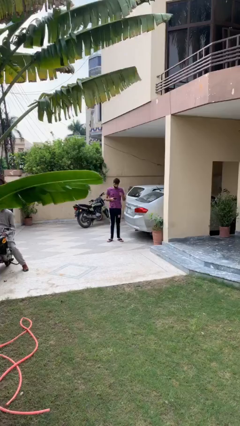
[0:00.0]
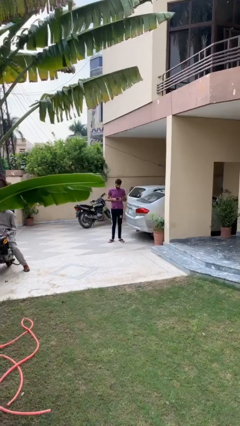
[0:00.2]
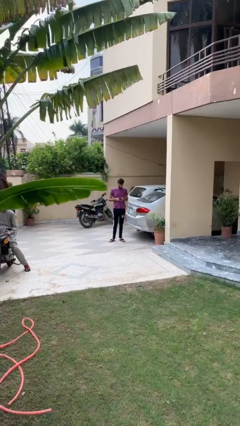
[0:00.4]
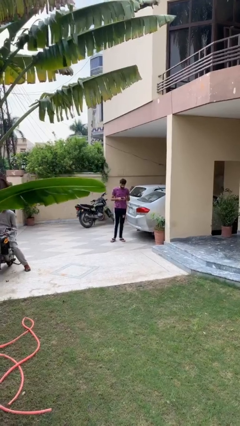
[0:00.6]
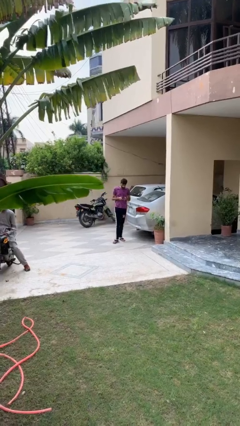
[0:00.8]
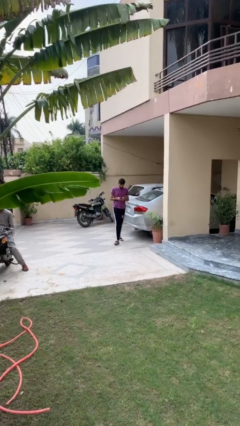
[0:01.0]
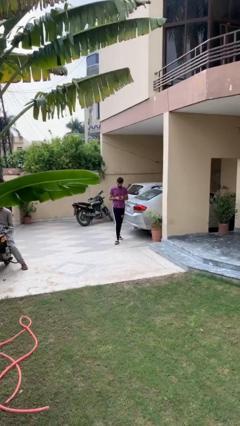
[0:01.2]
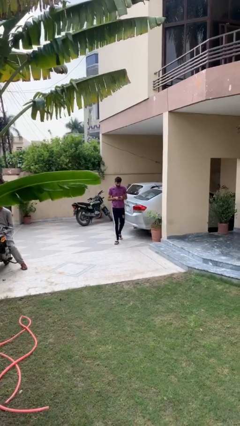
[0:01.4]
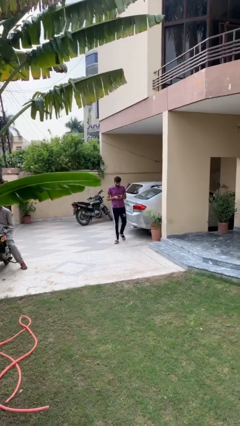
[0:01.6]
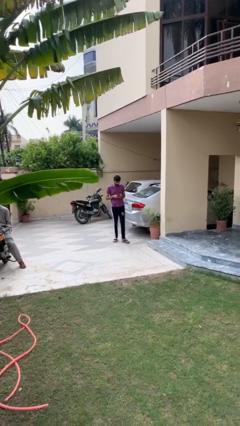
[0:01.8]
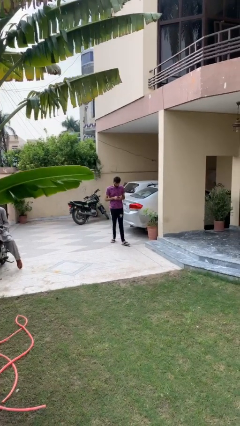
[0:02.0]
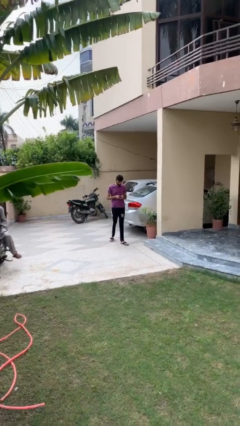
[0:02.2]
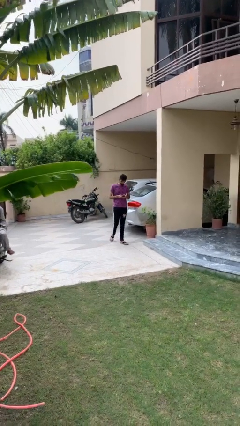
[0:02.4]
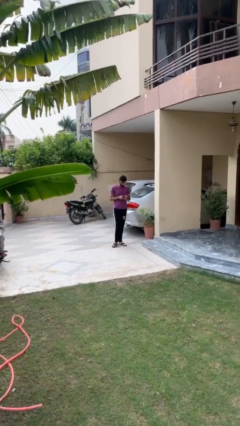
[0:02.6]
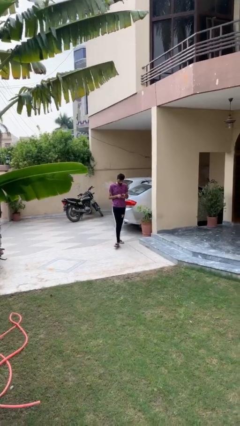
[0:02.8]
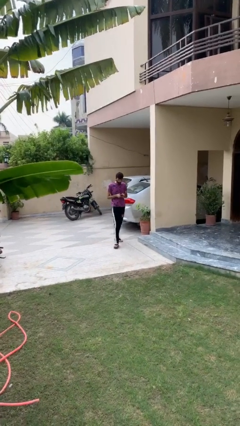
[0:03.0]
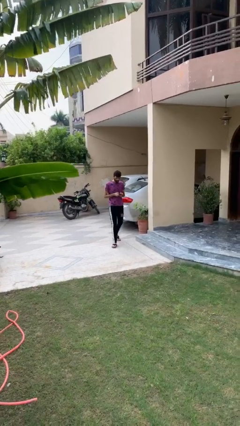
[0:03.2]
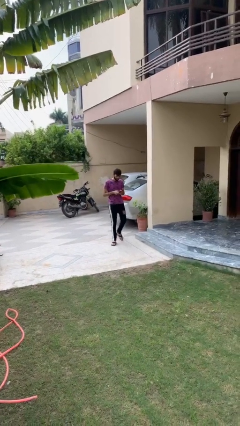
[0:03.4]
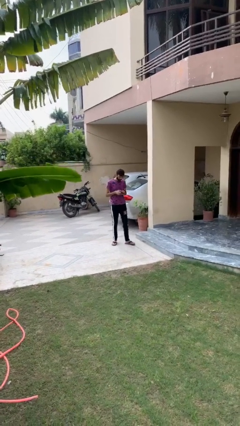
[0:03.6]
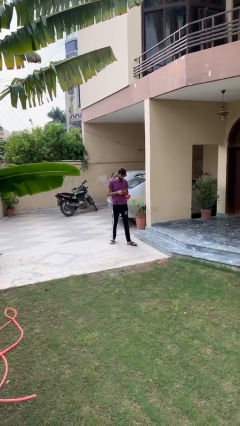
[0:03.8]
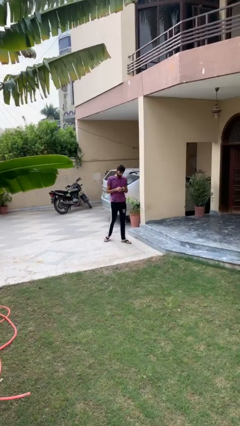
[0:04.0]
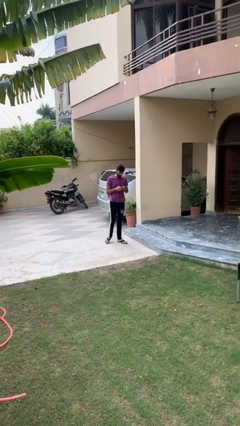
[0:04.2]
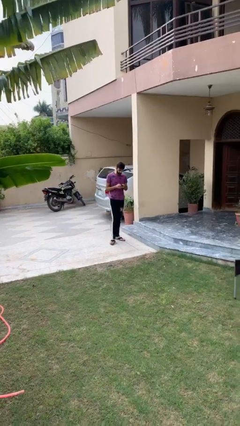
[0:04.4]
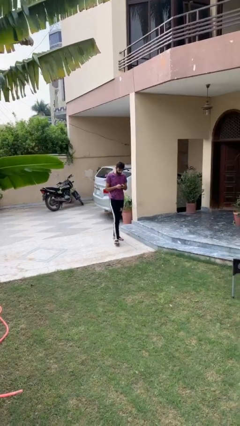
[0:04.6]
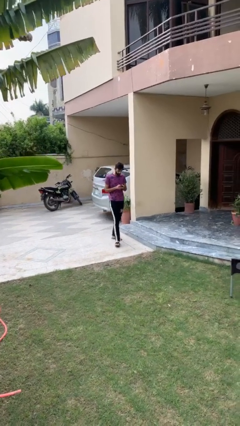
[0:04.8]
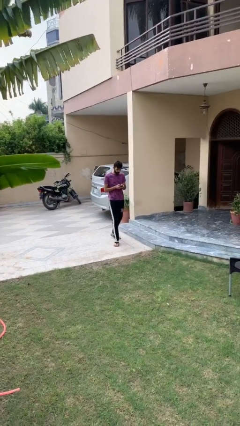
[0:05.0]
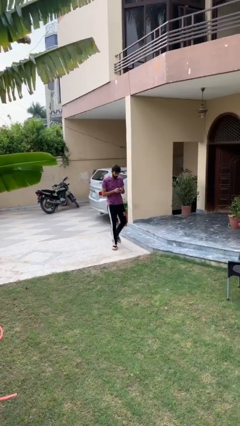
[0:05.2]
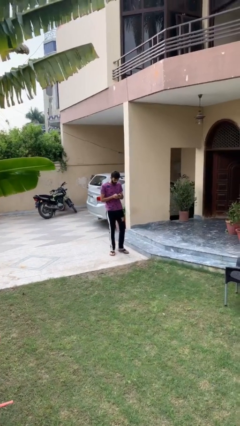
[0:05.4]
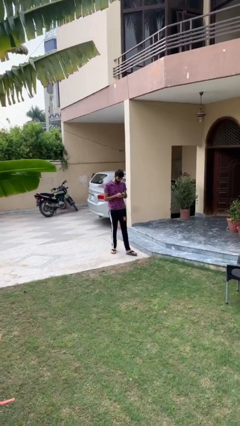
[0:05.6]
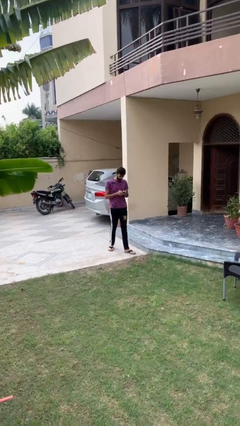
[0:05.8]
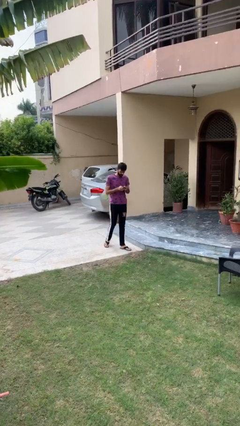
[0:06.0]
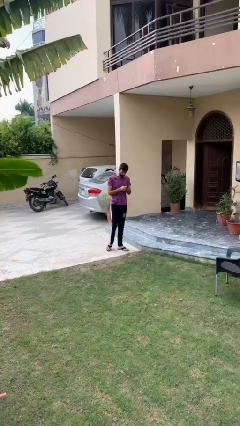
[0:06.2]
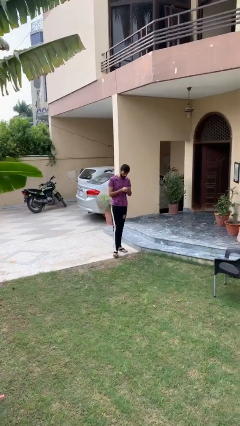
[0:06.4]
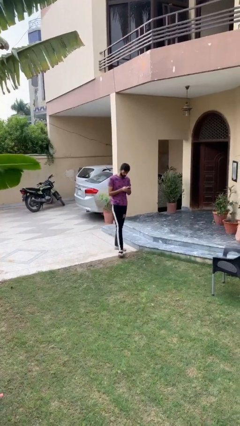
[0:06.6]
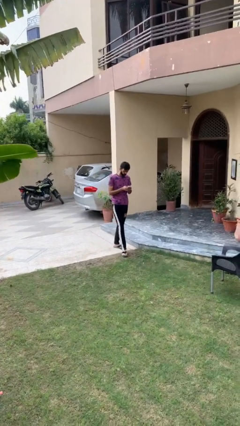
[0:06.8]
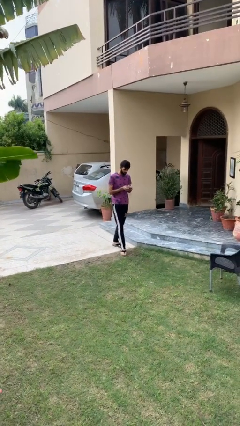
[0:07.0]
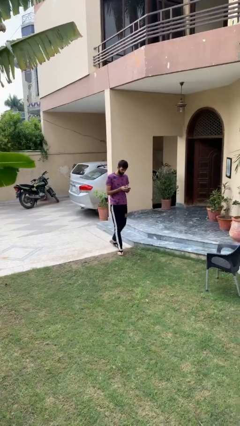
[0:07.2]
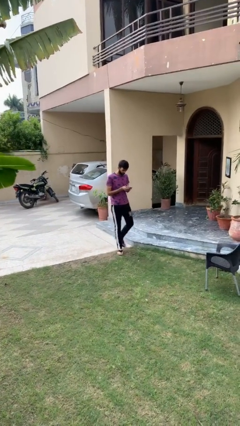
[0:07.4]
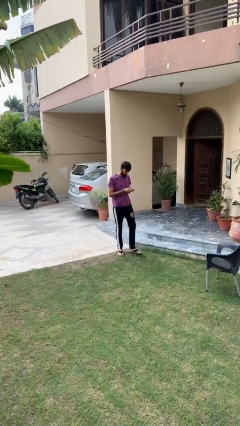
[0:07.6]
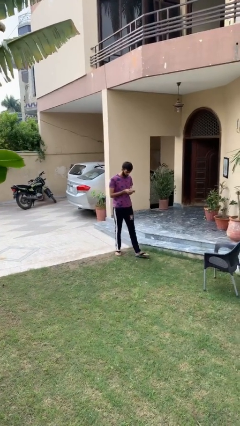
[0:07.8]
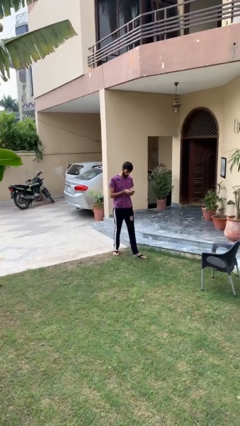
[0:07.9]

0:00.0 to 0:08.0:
person texts on phone

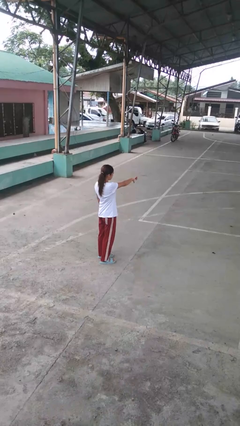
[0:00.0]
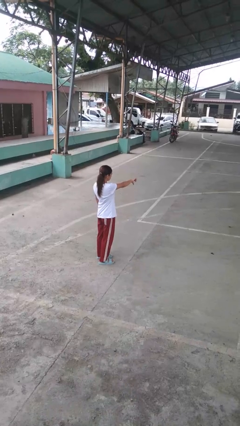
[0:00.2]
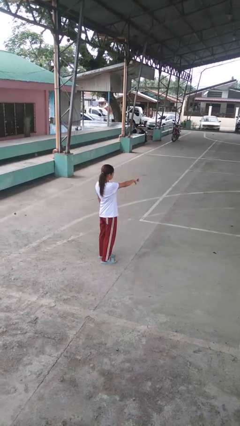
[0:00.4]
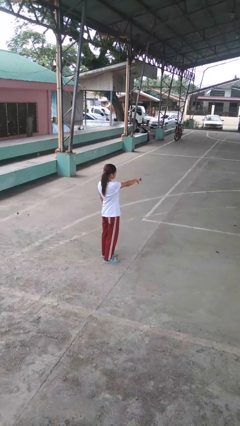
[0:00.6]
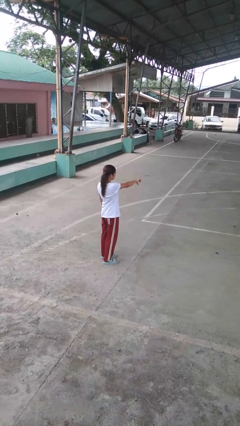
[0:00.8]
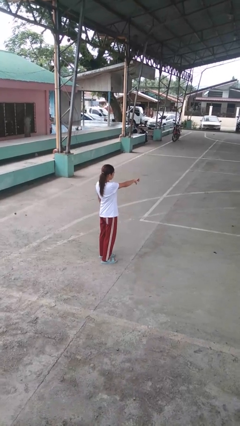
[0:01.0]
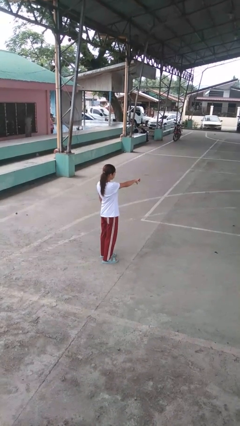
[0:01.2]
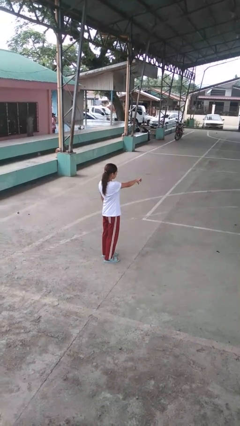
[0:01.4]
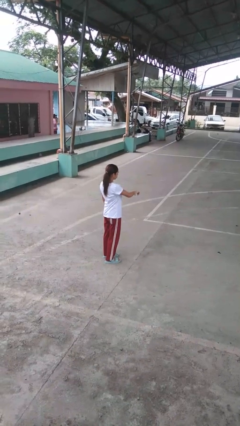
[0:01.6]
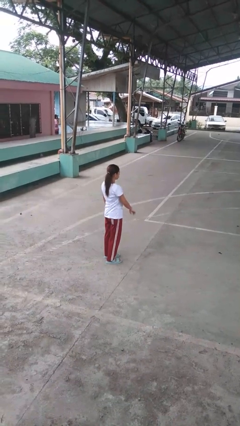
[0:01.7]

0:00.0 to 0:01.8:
person gestures thumbs down

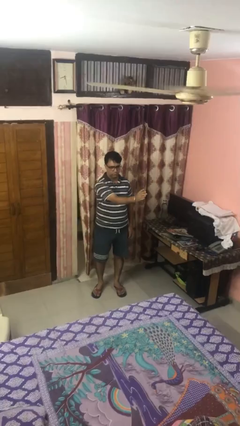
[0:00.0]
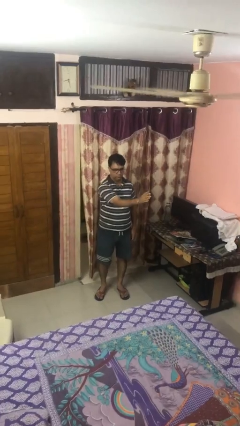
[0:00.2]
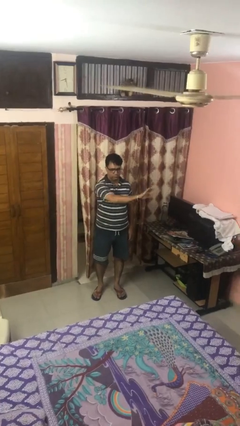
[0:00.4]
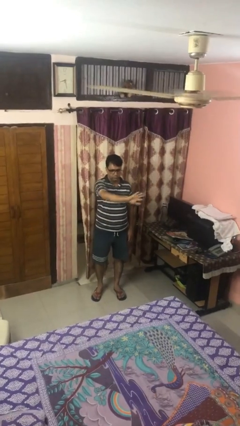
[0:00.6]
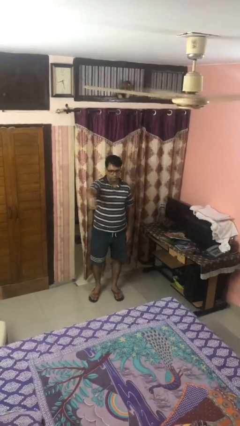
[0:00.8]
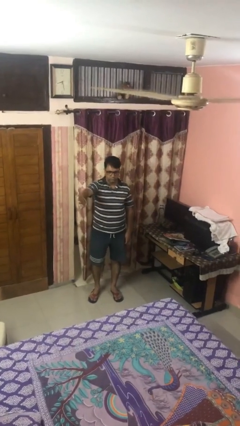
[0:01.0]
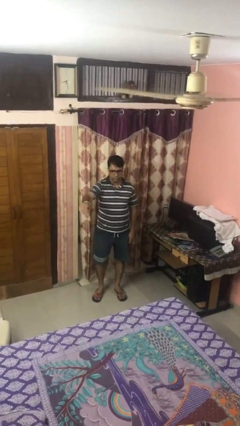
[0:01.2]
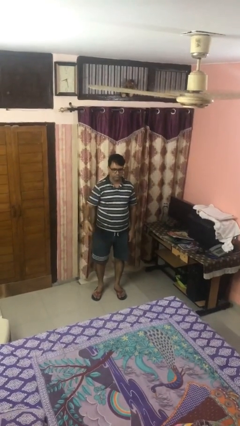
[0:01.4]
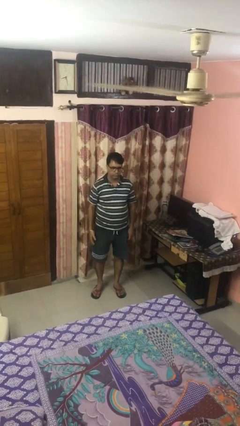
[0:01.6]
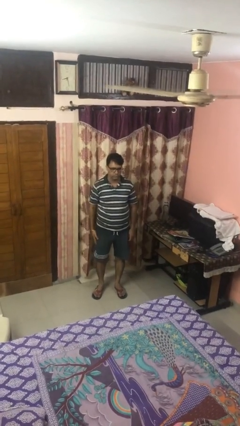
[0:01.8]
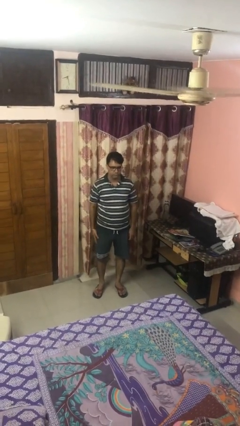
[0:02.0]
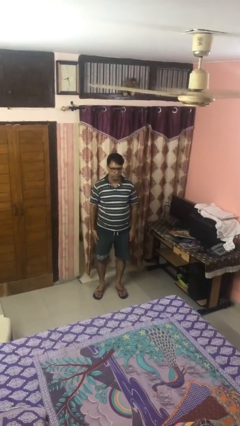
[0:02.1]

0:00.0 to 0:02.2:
person gestures swipe right

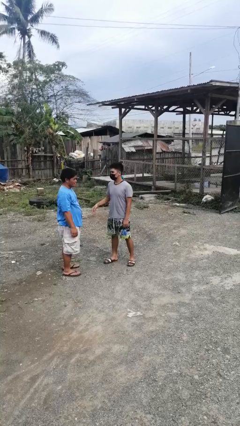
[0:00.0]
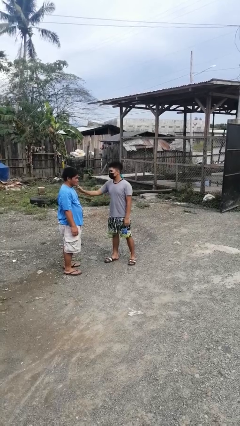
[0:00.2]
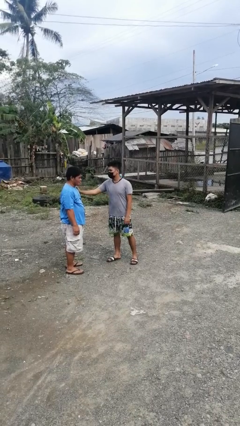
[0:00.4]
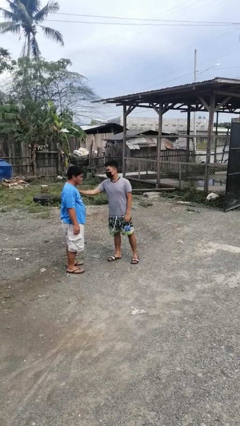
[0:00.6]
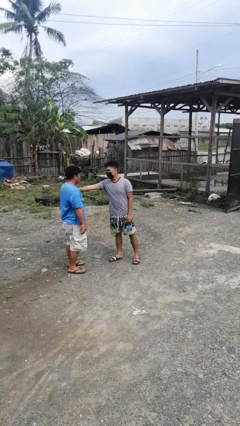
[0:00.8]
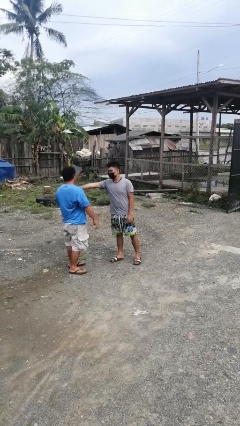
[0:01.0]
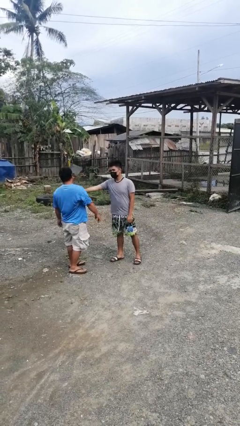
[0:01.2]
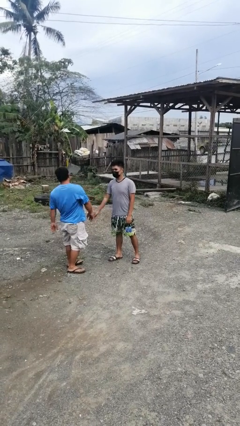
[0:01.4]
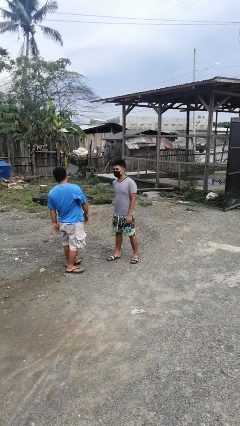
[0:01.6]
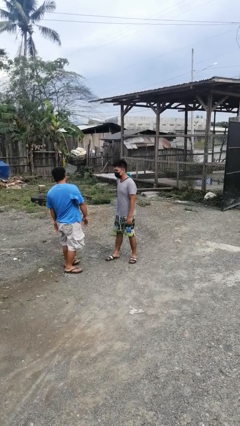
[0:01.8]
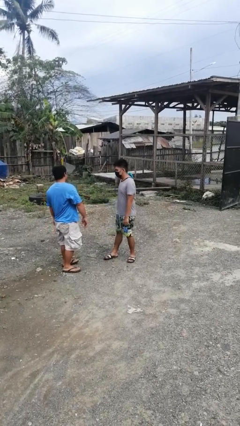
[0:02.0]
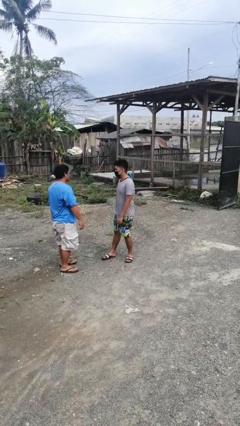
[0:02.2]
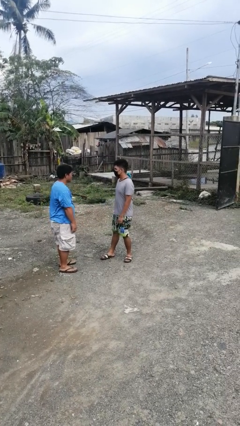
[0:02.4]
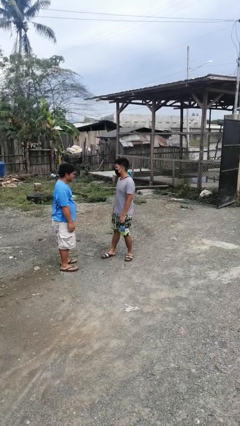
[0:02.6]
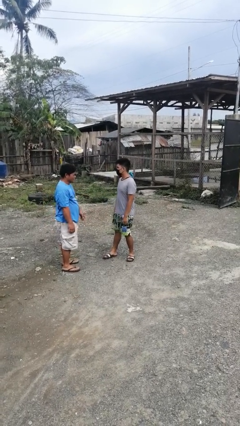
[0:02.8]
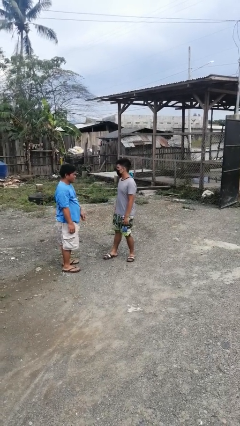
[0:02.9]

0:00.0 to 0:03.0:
person shoves person

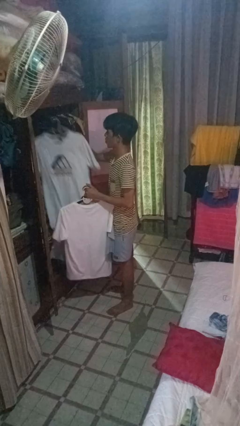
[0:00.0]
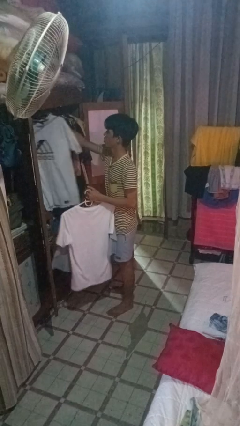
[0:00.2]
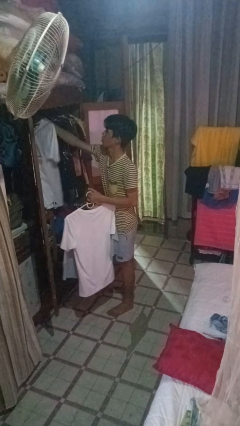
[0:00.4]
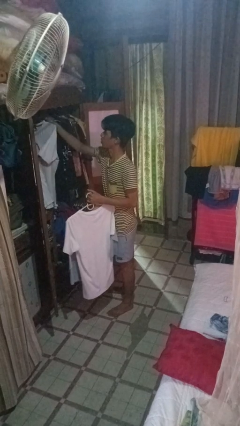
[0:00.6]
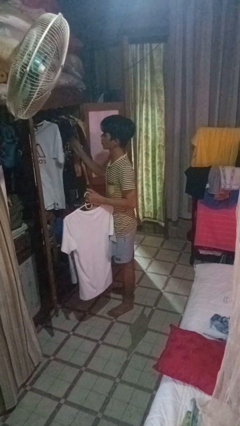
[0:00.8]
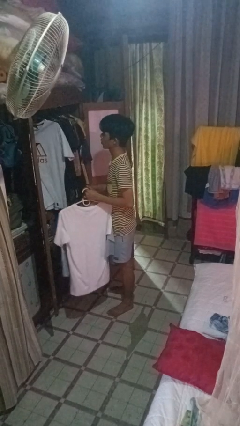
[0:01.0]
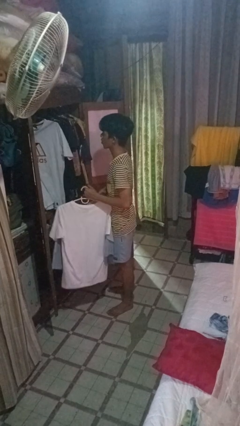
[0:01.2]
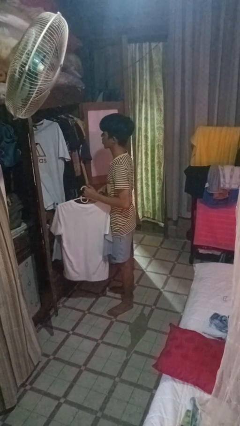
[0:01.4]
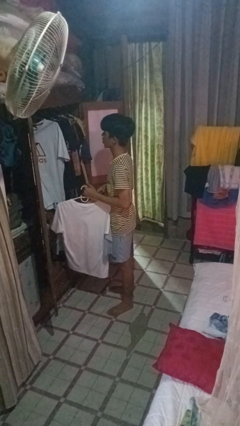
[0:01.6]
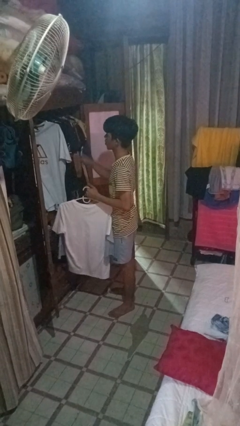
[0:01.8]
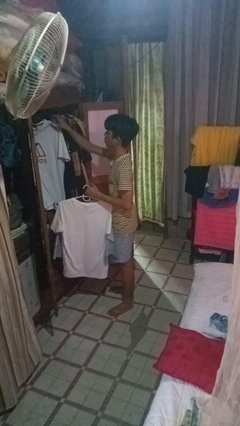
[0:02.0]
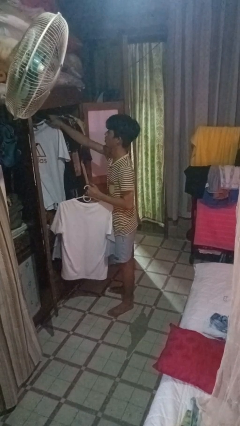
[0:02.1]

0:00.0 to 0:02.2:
person puts clothes into closet

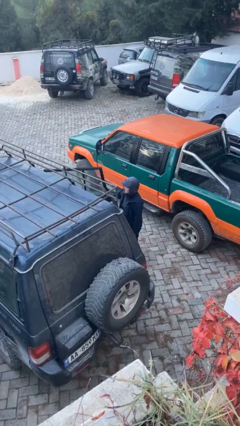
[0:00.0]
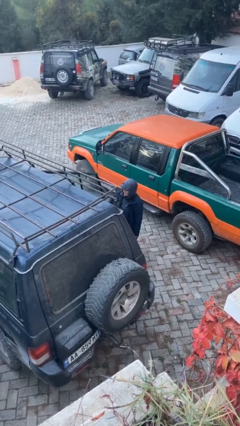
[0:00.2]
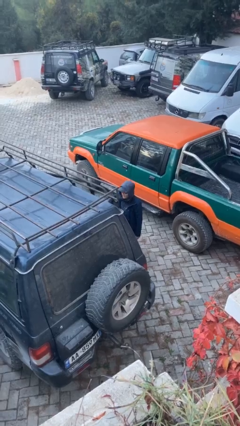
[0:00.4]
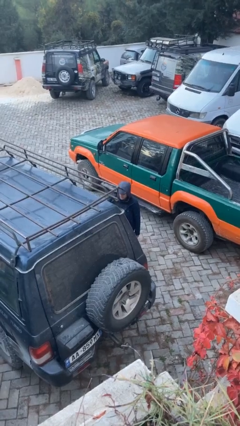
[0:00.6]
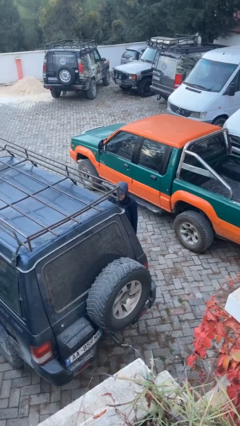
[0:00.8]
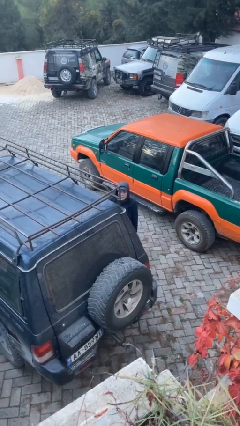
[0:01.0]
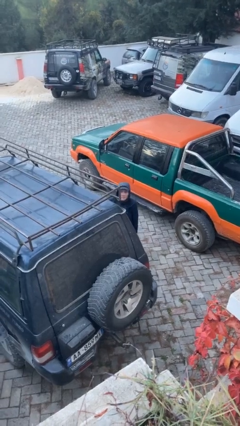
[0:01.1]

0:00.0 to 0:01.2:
person closes car door
